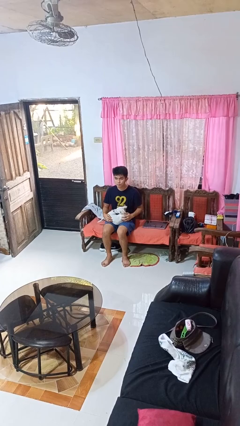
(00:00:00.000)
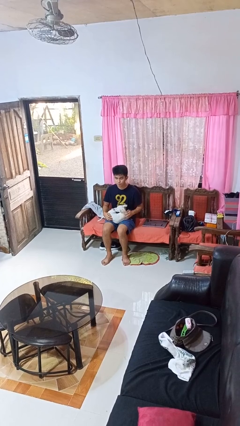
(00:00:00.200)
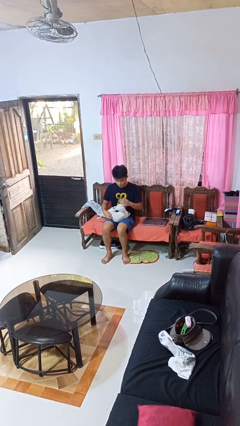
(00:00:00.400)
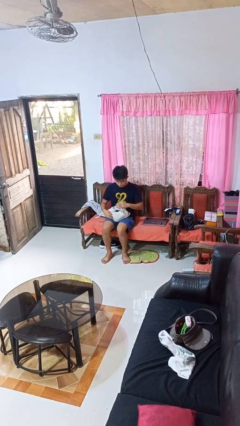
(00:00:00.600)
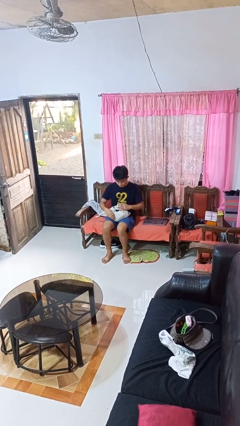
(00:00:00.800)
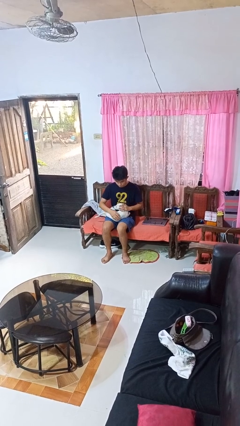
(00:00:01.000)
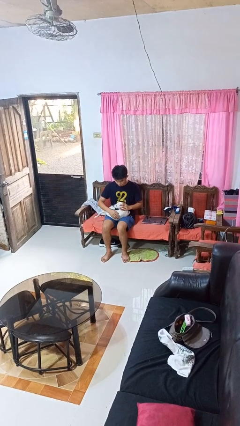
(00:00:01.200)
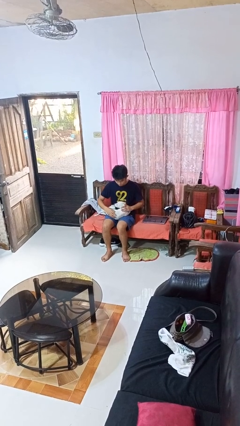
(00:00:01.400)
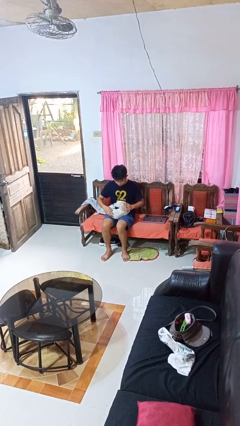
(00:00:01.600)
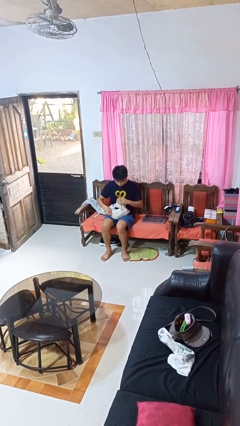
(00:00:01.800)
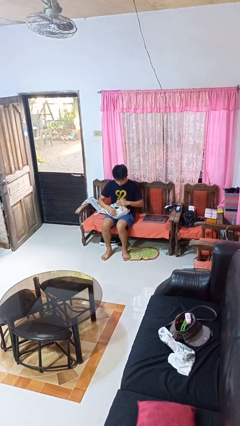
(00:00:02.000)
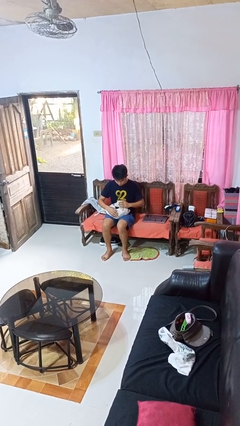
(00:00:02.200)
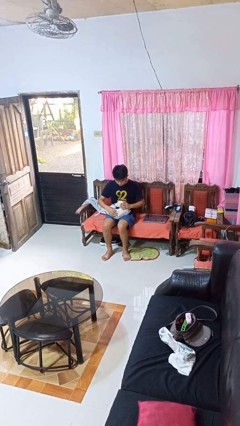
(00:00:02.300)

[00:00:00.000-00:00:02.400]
person pets dog

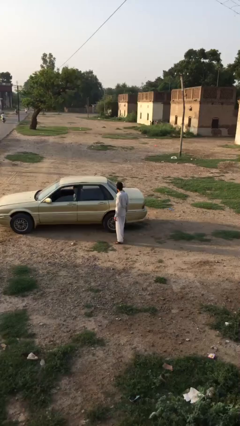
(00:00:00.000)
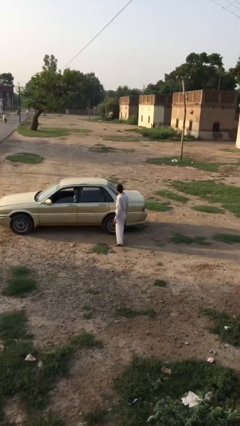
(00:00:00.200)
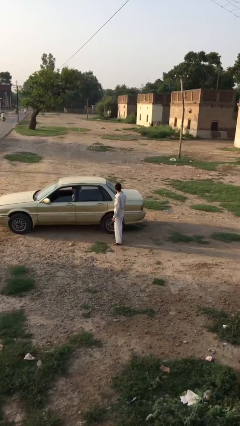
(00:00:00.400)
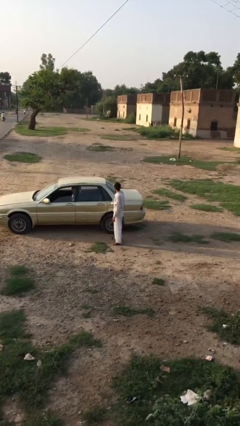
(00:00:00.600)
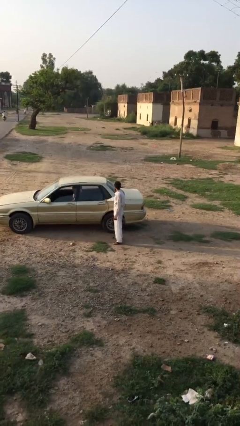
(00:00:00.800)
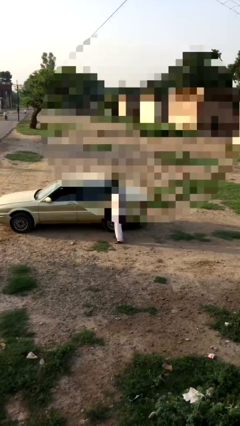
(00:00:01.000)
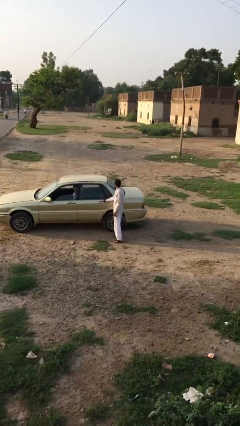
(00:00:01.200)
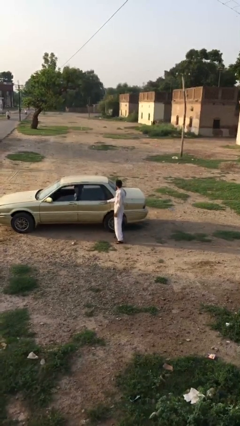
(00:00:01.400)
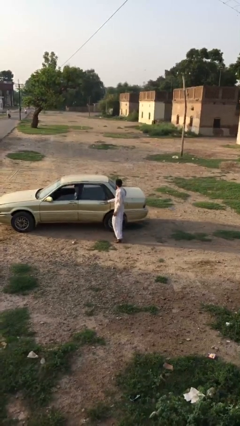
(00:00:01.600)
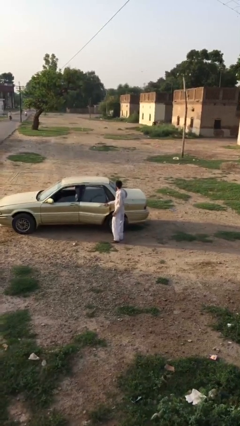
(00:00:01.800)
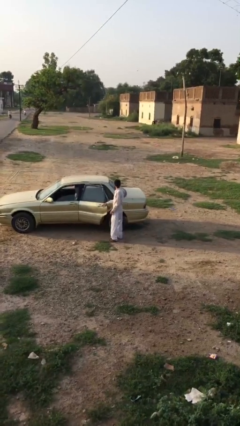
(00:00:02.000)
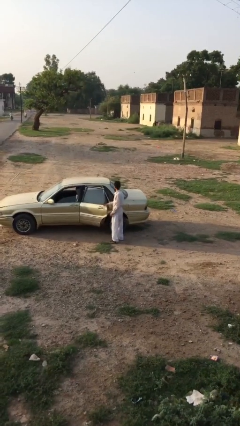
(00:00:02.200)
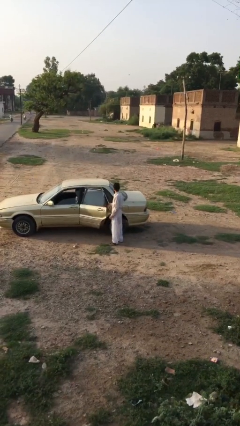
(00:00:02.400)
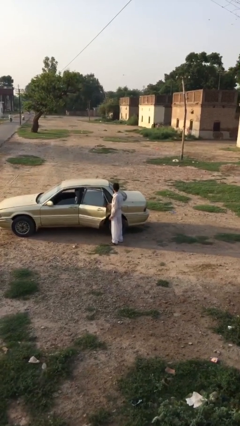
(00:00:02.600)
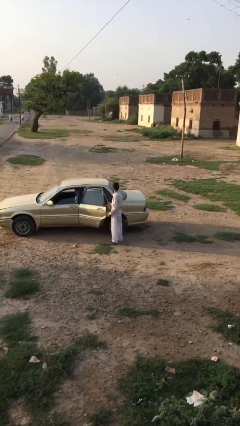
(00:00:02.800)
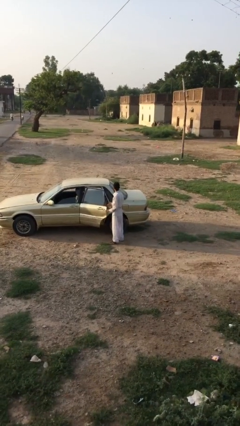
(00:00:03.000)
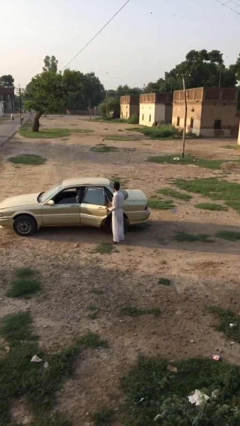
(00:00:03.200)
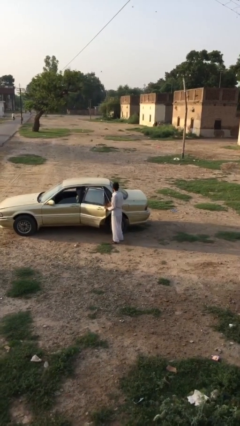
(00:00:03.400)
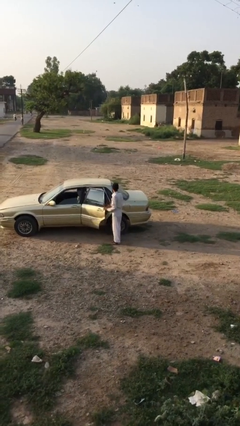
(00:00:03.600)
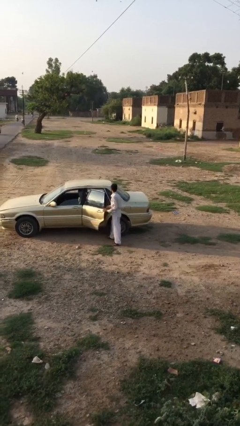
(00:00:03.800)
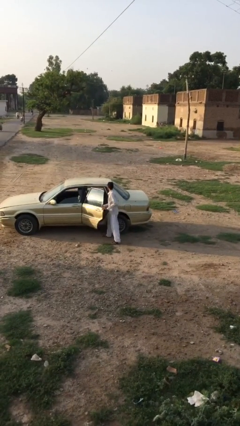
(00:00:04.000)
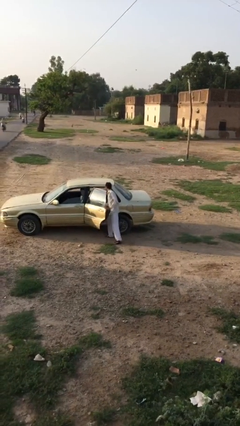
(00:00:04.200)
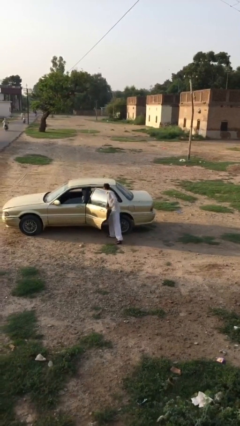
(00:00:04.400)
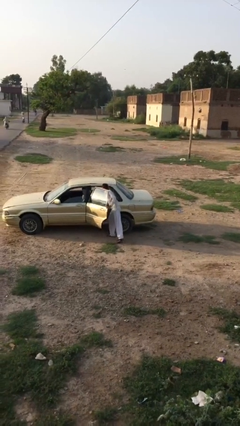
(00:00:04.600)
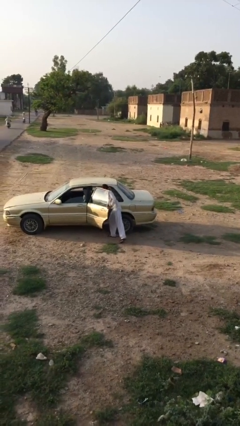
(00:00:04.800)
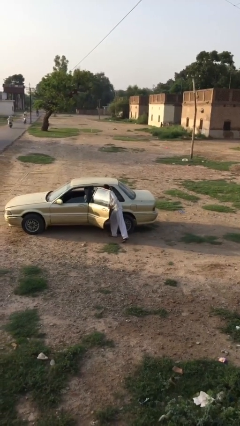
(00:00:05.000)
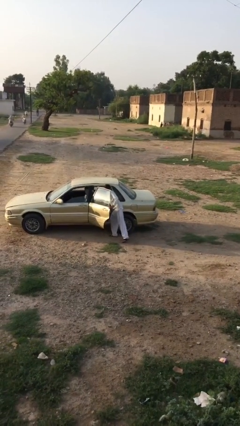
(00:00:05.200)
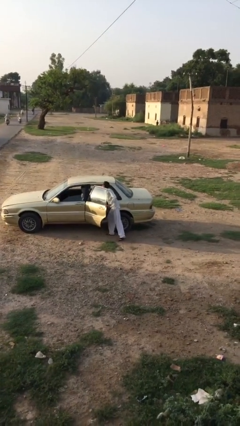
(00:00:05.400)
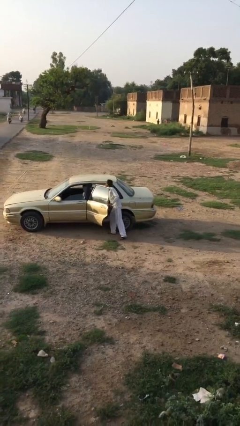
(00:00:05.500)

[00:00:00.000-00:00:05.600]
person opens car door

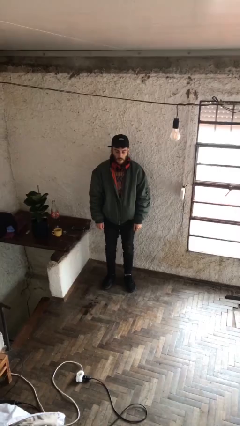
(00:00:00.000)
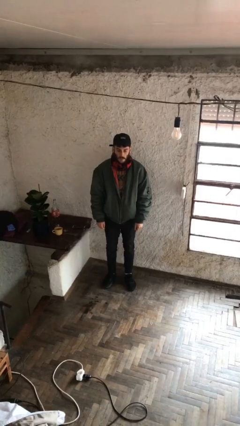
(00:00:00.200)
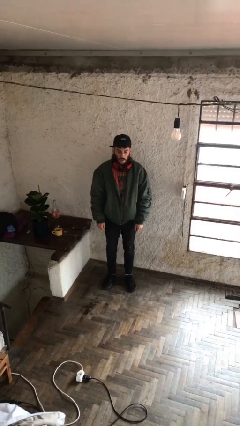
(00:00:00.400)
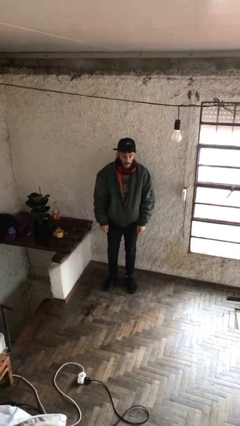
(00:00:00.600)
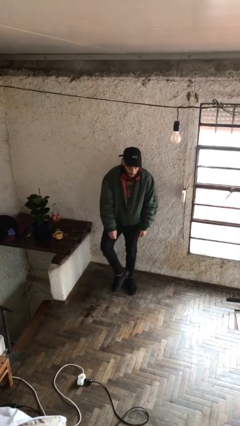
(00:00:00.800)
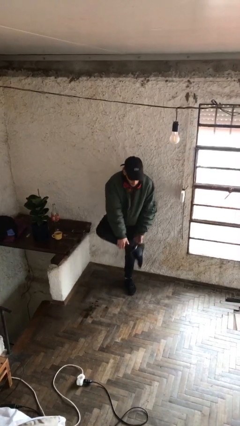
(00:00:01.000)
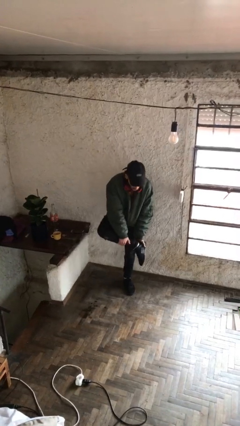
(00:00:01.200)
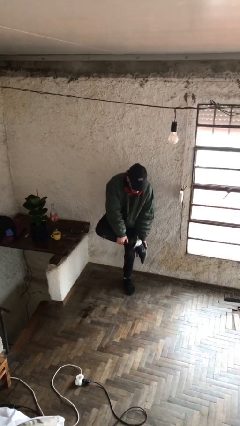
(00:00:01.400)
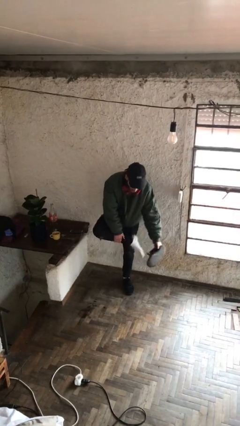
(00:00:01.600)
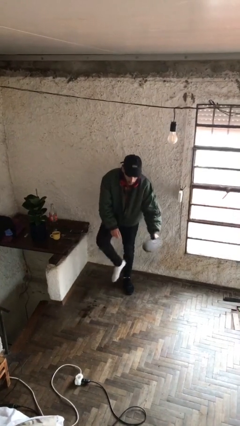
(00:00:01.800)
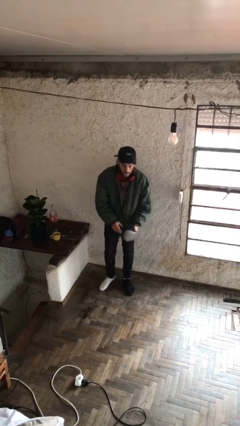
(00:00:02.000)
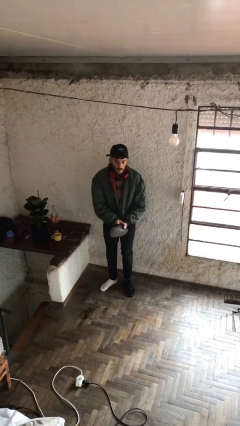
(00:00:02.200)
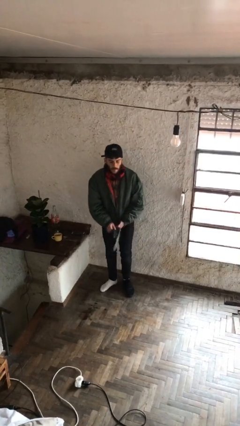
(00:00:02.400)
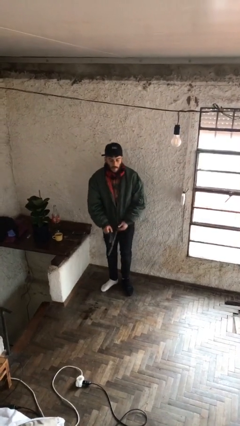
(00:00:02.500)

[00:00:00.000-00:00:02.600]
person takes off shoes

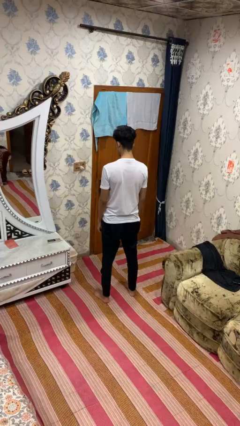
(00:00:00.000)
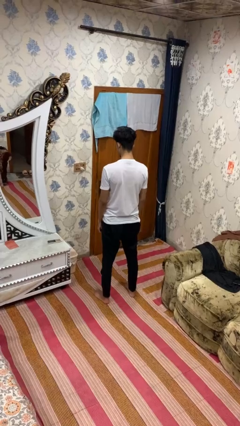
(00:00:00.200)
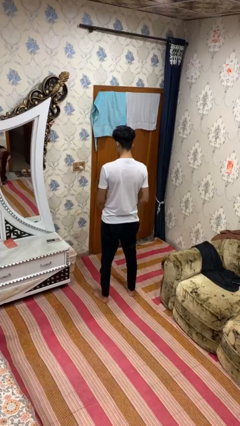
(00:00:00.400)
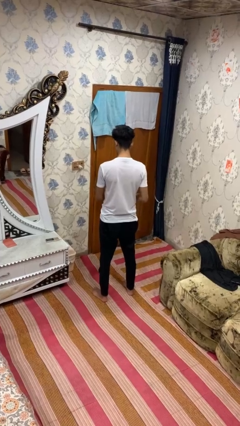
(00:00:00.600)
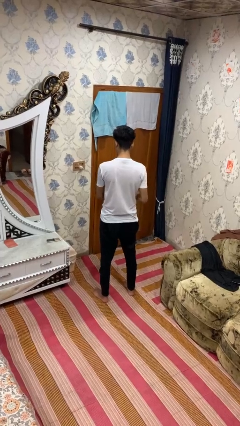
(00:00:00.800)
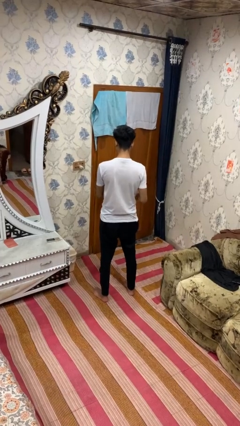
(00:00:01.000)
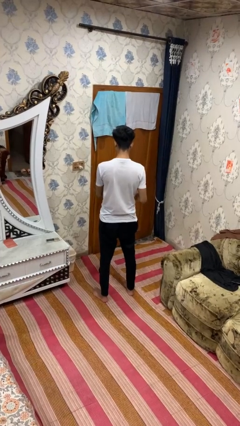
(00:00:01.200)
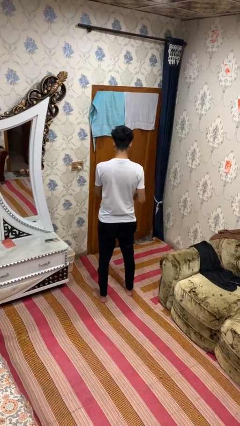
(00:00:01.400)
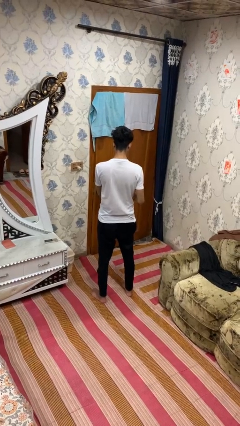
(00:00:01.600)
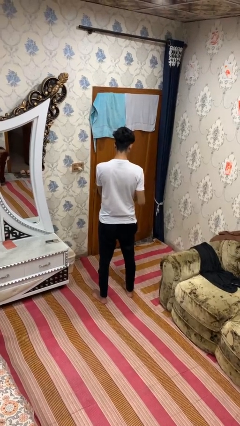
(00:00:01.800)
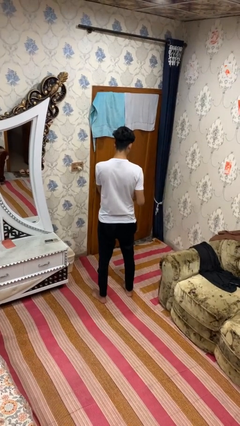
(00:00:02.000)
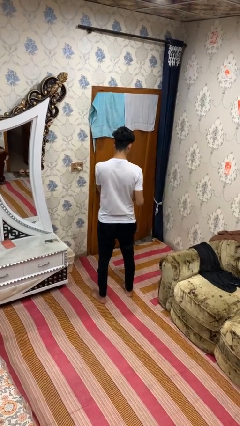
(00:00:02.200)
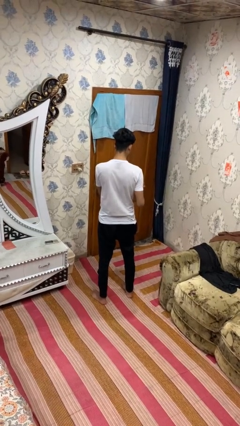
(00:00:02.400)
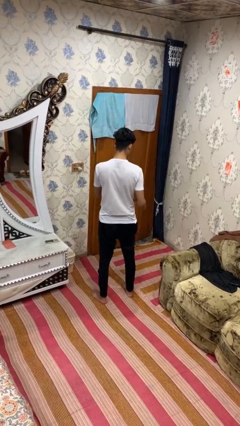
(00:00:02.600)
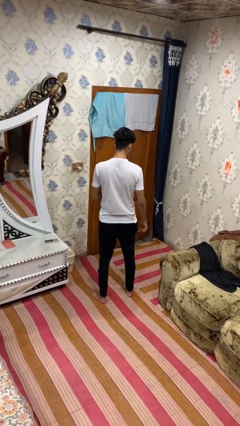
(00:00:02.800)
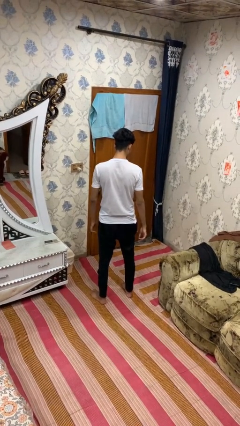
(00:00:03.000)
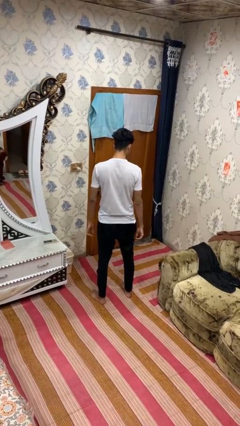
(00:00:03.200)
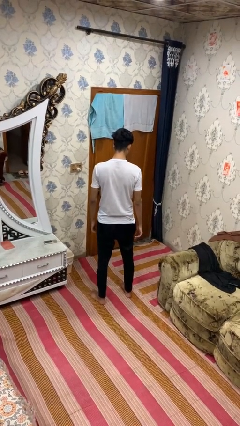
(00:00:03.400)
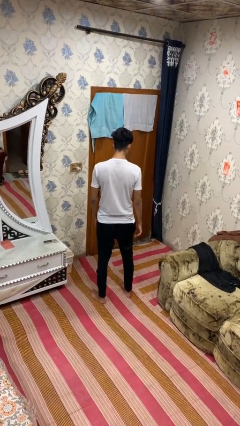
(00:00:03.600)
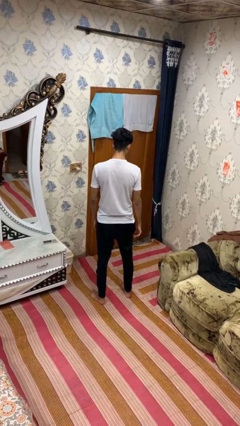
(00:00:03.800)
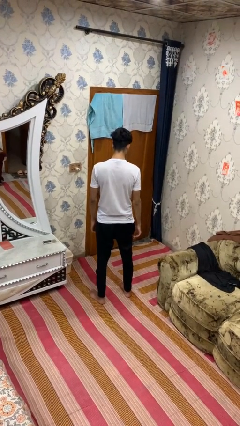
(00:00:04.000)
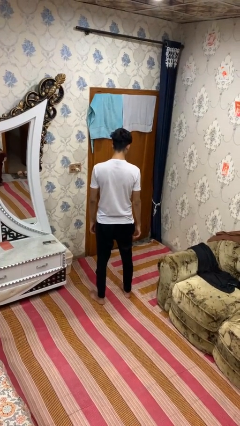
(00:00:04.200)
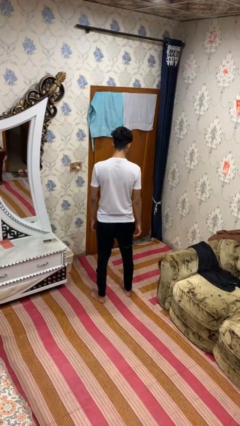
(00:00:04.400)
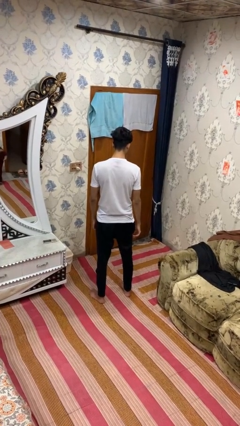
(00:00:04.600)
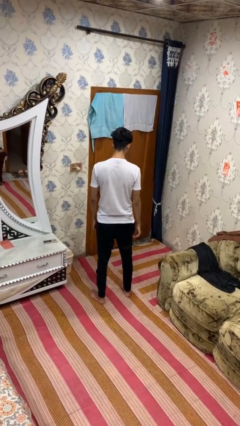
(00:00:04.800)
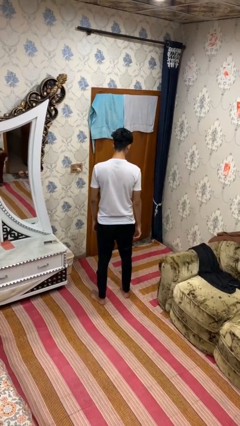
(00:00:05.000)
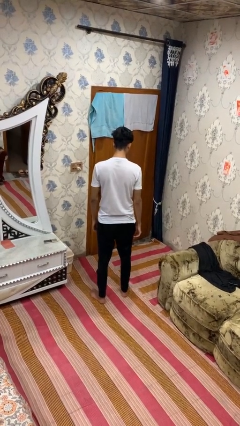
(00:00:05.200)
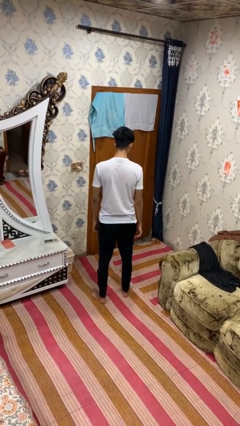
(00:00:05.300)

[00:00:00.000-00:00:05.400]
person puts on ring

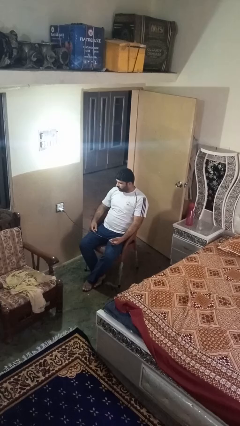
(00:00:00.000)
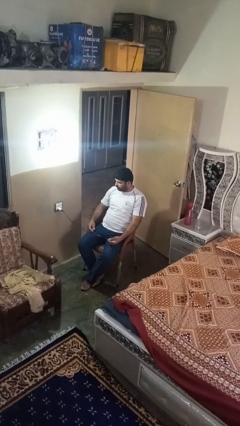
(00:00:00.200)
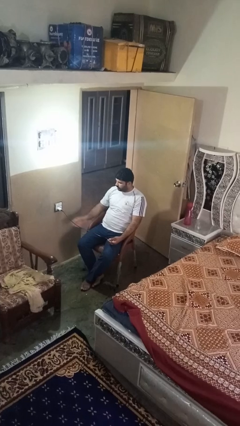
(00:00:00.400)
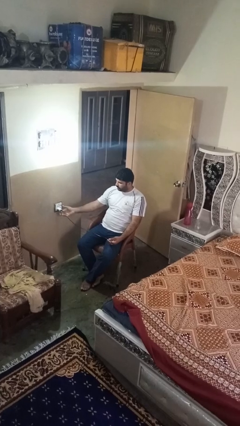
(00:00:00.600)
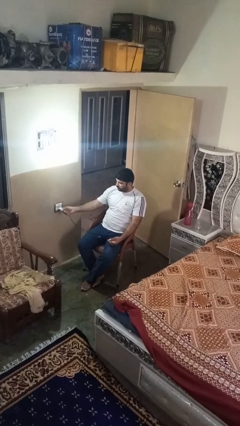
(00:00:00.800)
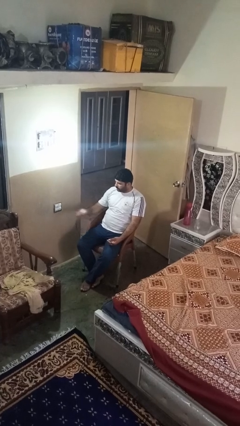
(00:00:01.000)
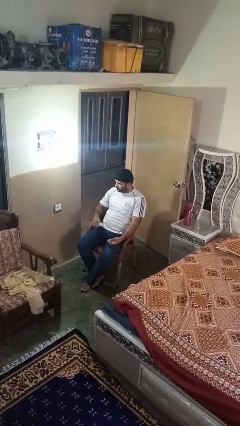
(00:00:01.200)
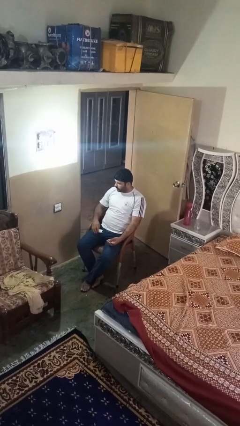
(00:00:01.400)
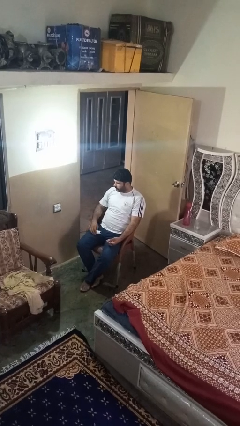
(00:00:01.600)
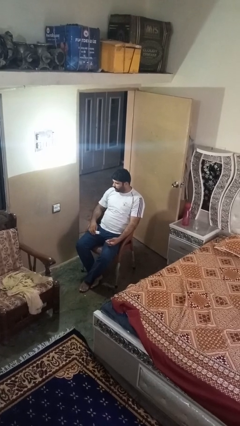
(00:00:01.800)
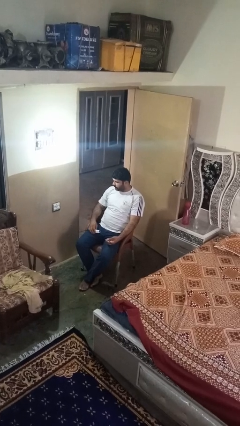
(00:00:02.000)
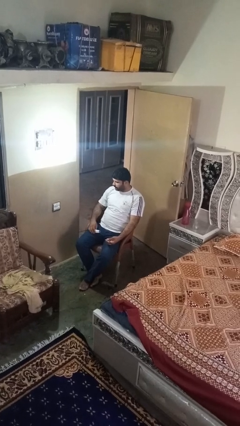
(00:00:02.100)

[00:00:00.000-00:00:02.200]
person unplugs from electrical socket
